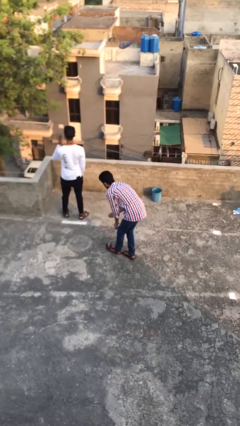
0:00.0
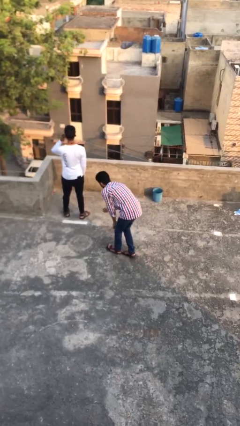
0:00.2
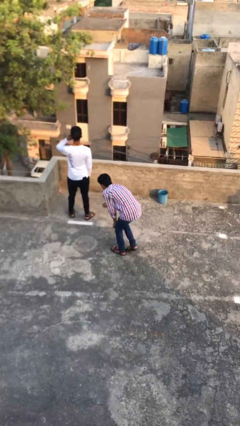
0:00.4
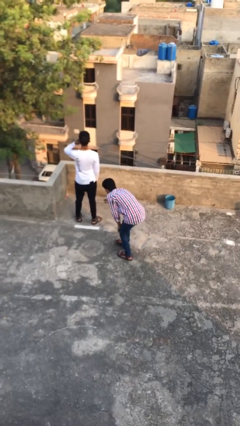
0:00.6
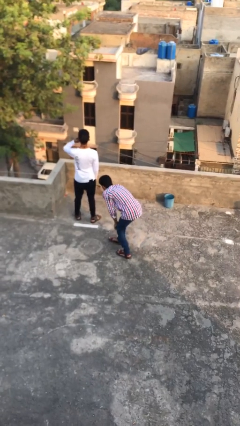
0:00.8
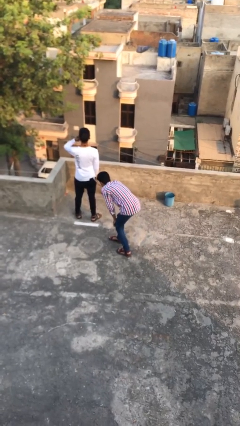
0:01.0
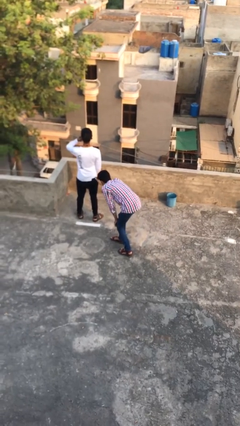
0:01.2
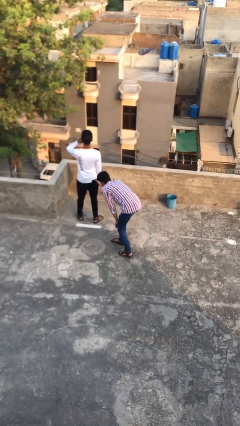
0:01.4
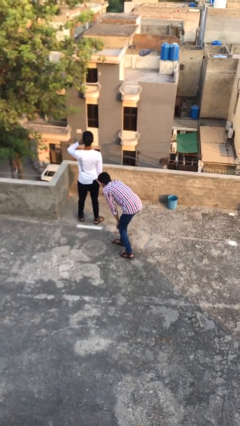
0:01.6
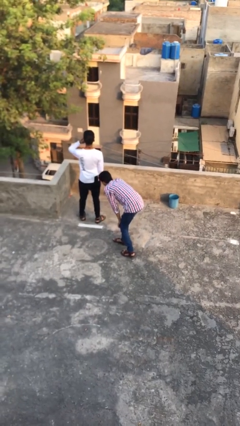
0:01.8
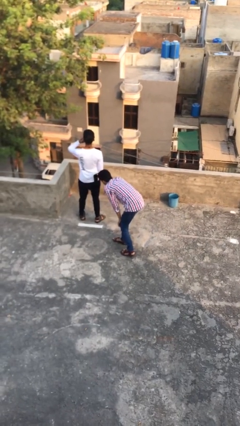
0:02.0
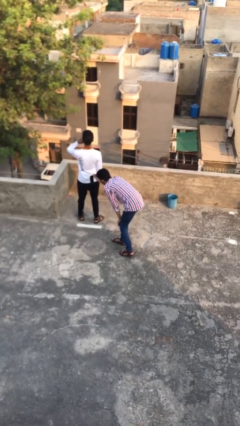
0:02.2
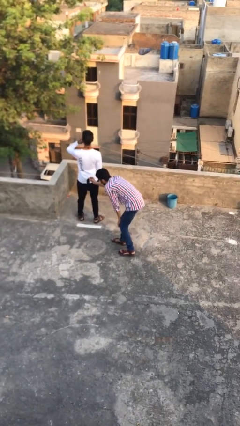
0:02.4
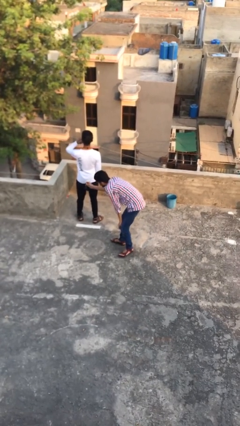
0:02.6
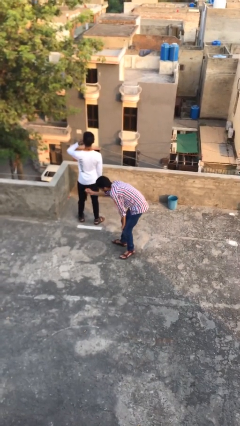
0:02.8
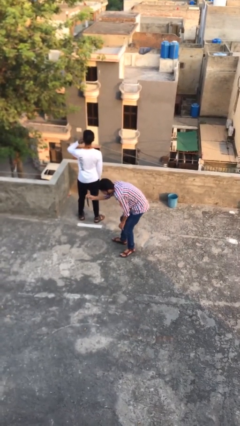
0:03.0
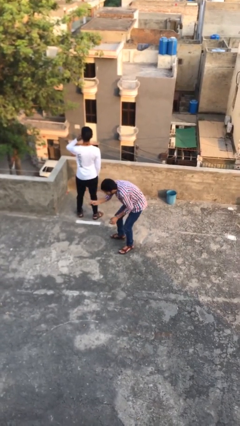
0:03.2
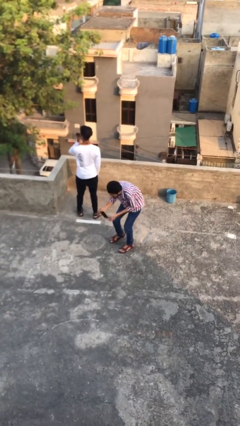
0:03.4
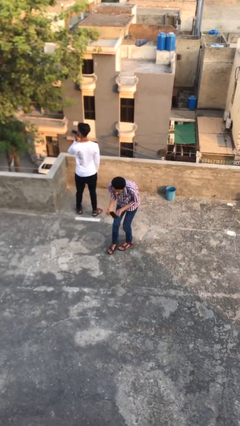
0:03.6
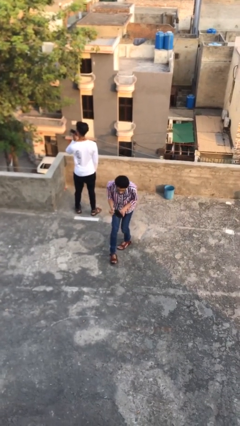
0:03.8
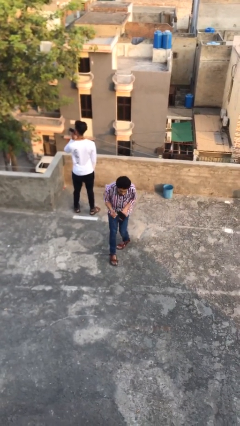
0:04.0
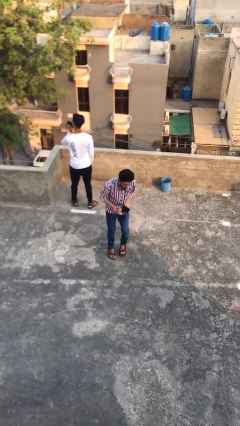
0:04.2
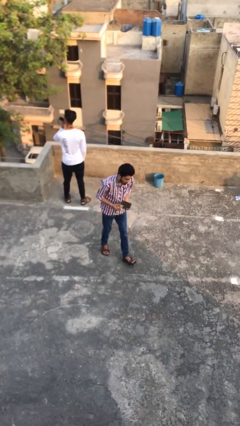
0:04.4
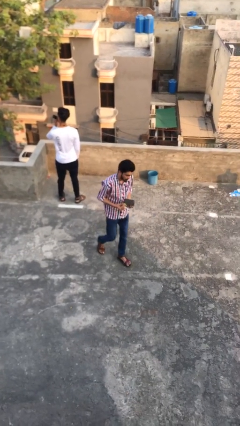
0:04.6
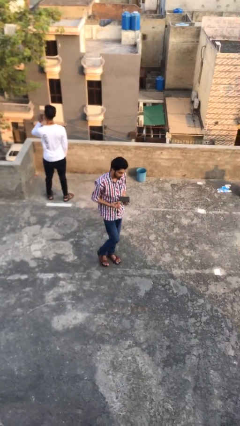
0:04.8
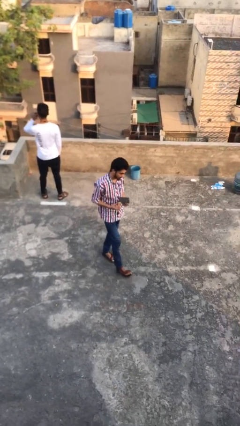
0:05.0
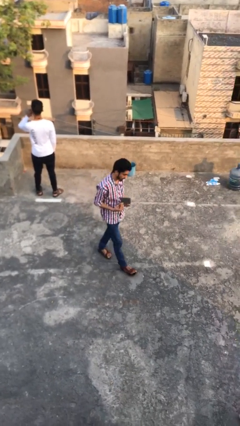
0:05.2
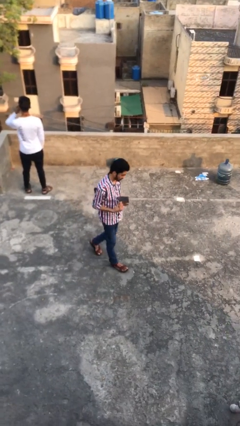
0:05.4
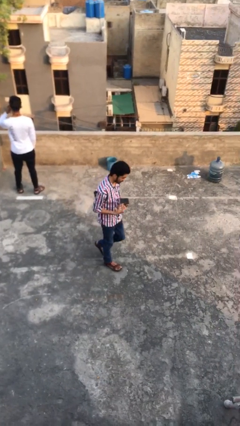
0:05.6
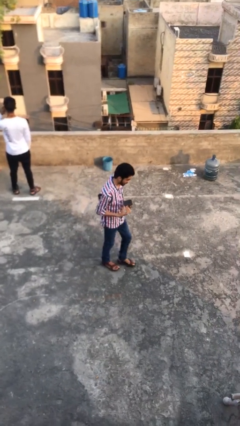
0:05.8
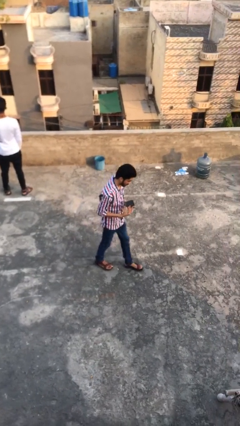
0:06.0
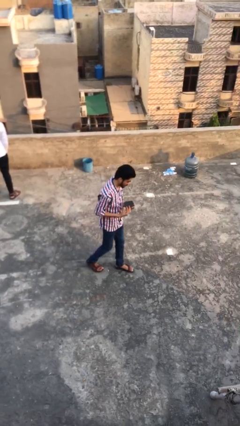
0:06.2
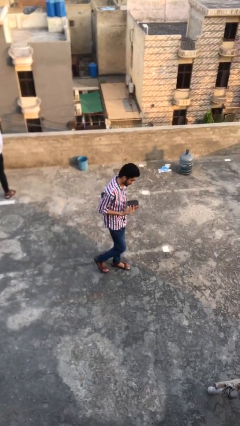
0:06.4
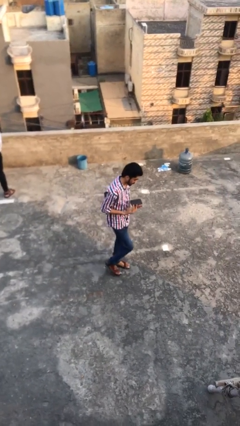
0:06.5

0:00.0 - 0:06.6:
person steals object from person

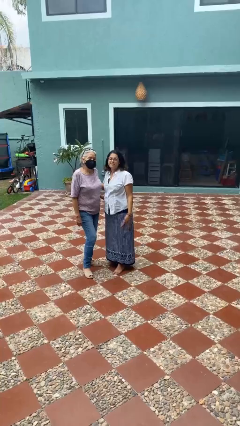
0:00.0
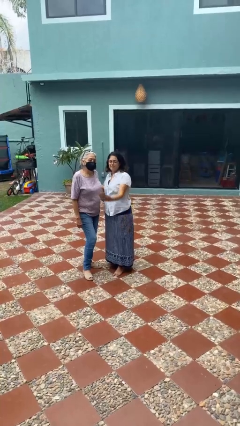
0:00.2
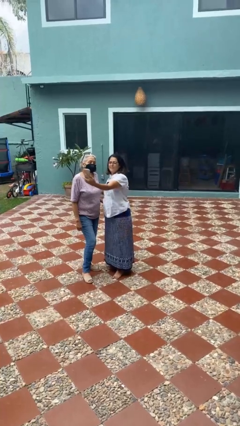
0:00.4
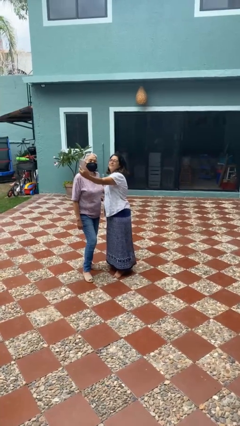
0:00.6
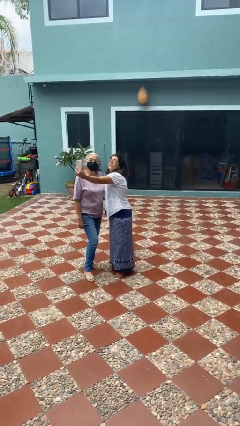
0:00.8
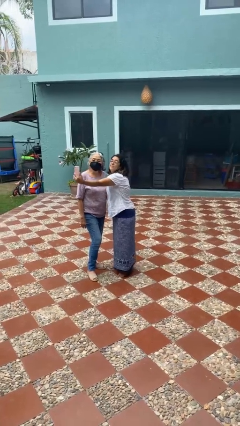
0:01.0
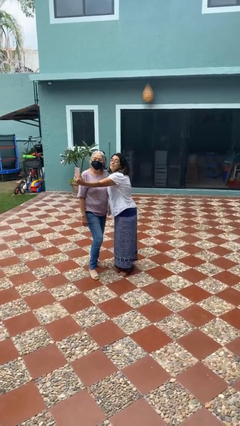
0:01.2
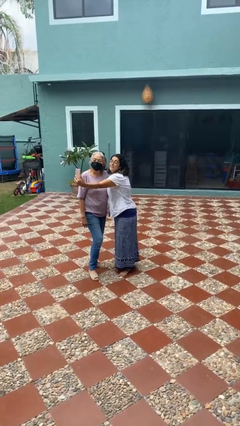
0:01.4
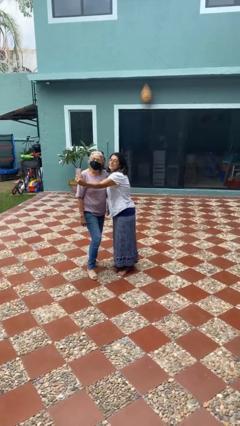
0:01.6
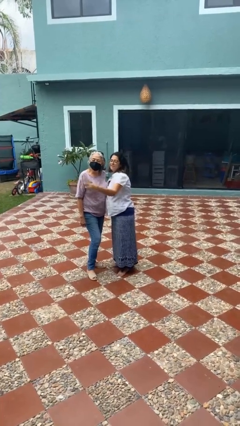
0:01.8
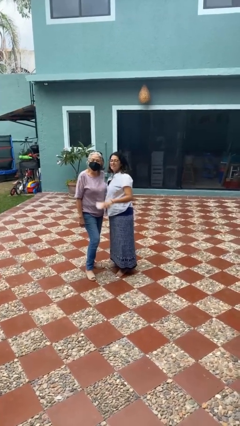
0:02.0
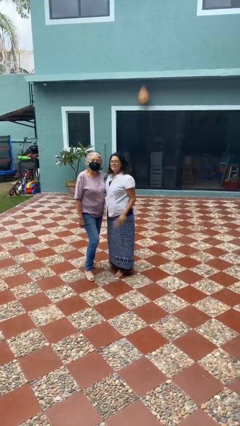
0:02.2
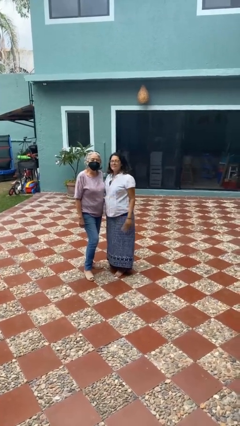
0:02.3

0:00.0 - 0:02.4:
person takes selfie with person

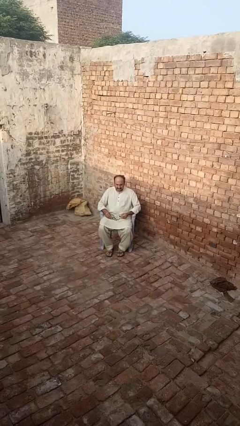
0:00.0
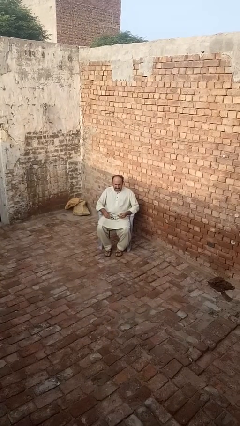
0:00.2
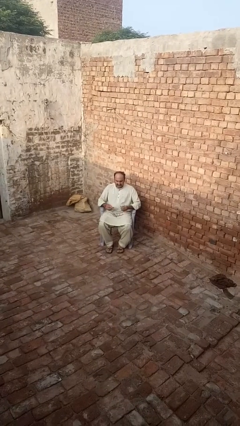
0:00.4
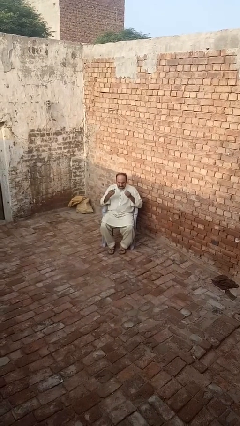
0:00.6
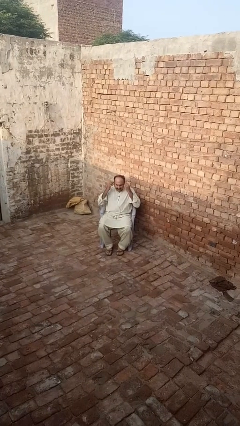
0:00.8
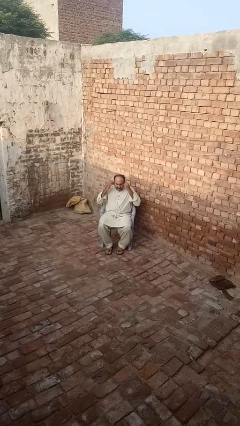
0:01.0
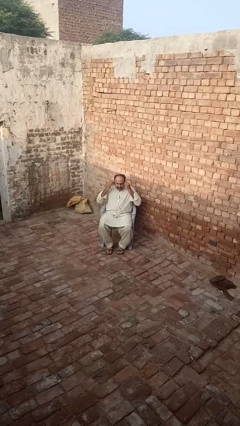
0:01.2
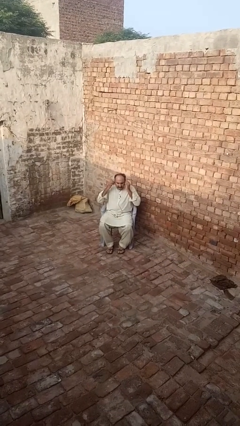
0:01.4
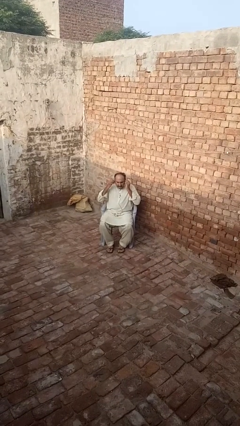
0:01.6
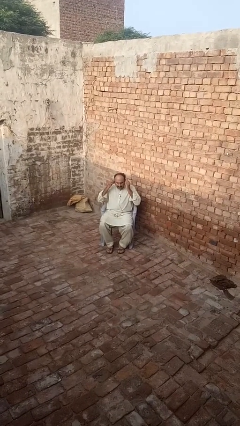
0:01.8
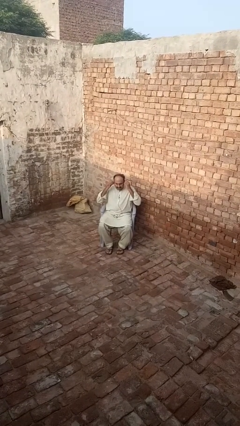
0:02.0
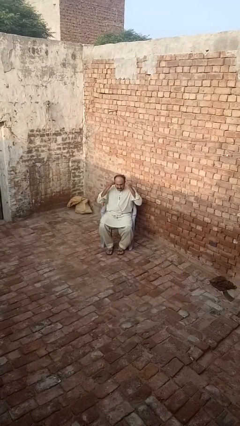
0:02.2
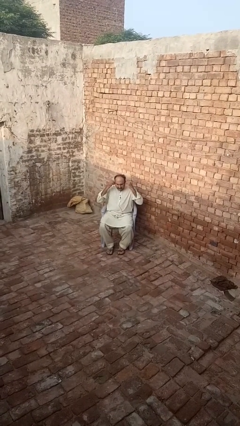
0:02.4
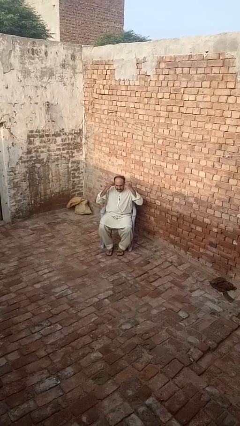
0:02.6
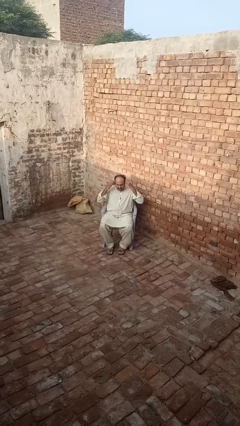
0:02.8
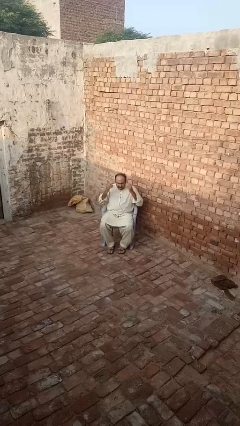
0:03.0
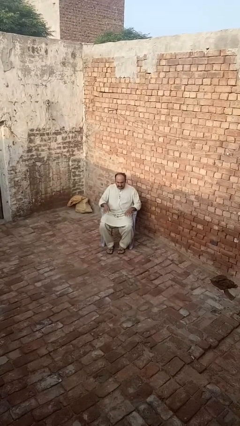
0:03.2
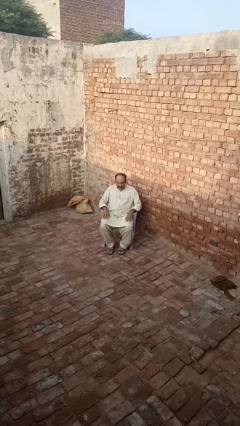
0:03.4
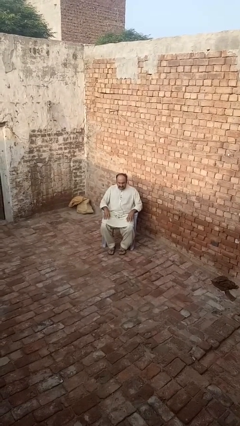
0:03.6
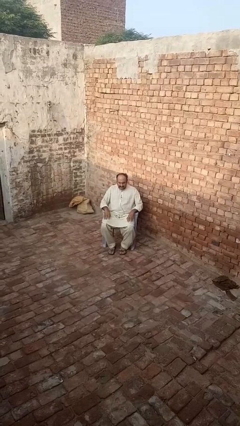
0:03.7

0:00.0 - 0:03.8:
person puts on headphones

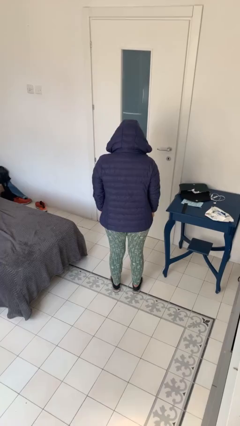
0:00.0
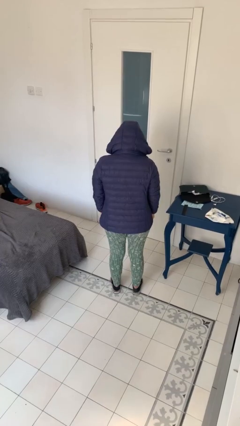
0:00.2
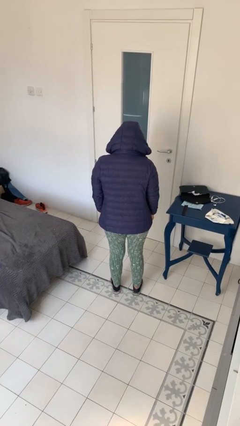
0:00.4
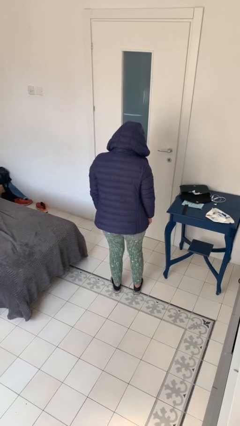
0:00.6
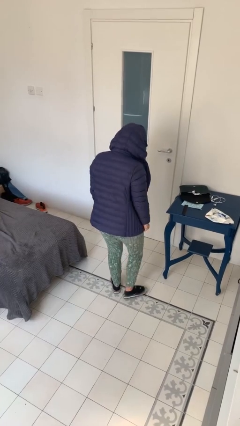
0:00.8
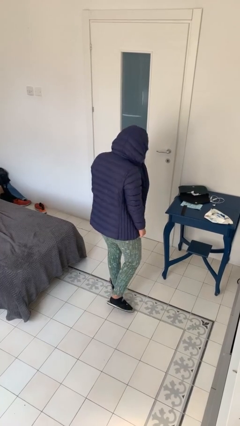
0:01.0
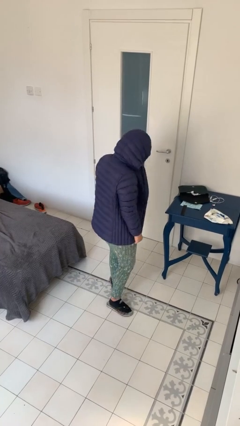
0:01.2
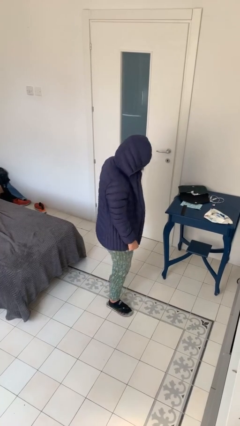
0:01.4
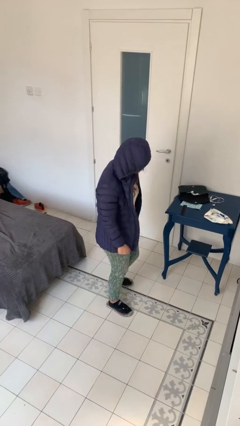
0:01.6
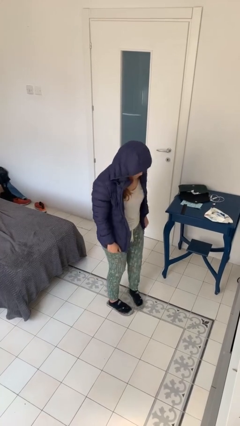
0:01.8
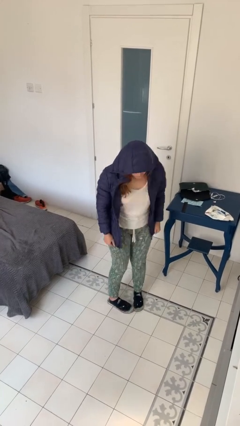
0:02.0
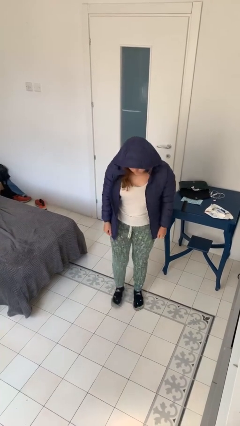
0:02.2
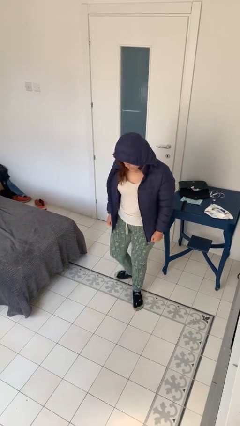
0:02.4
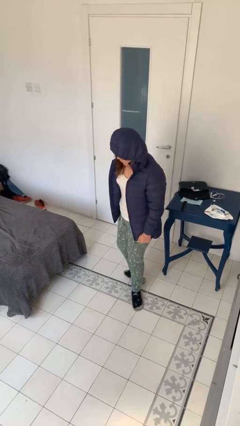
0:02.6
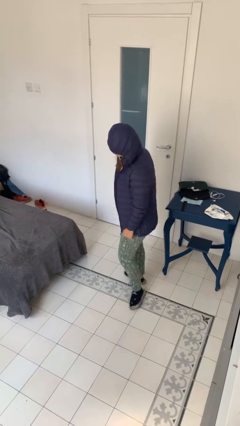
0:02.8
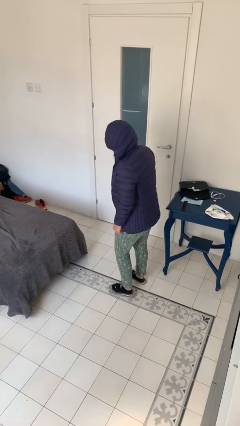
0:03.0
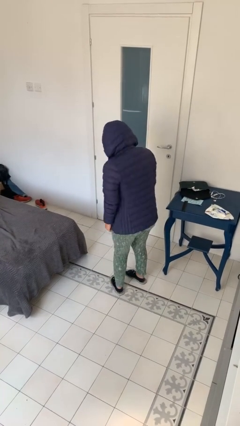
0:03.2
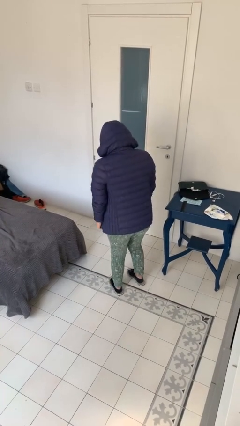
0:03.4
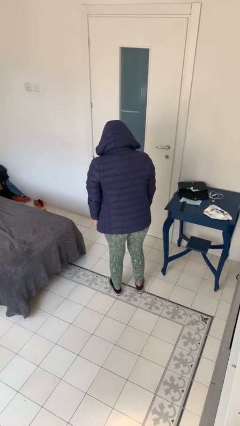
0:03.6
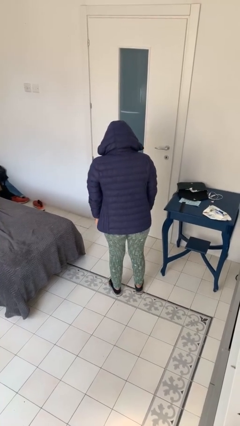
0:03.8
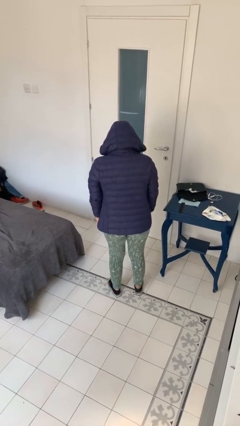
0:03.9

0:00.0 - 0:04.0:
person twirls

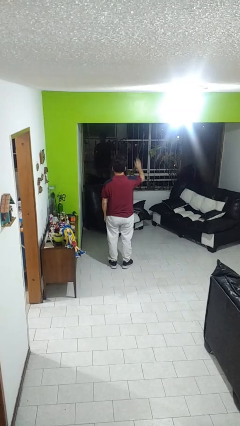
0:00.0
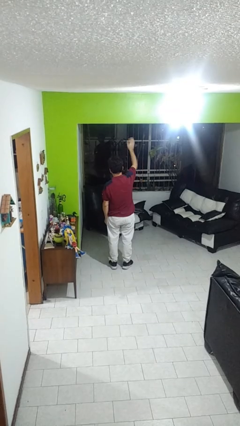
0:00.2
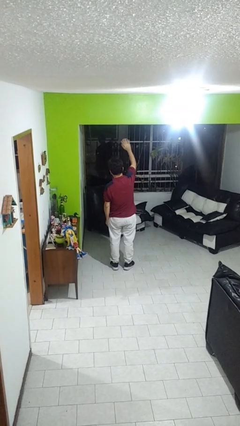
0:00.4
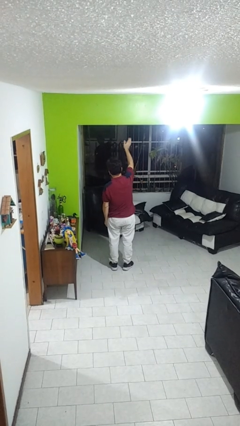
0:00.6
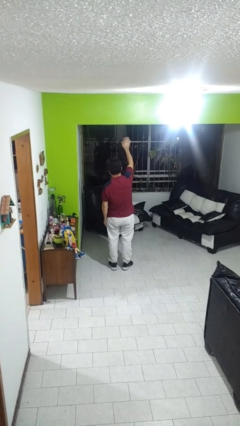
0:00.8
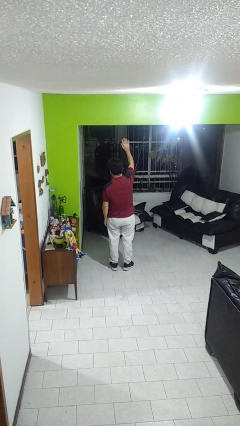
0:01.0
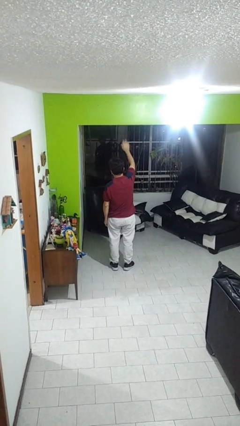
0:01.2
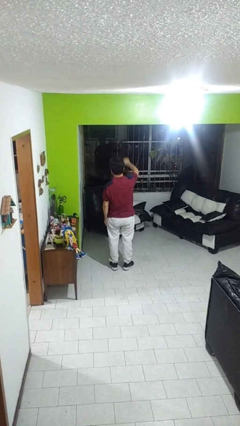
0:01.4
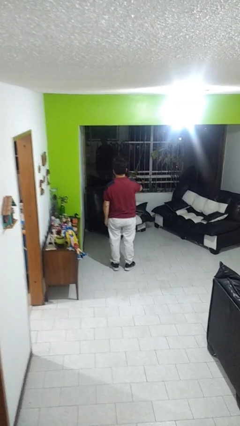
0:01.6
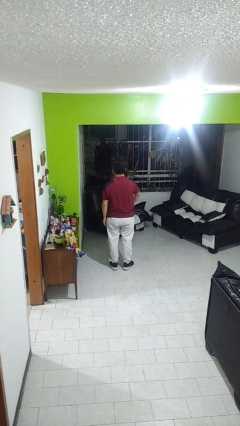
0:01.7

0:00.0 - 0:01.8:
person waves at person
